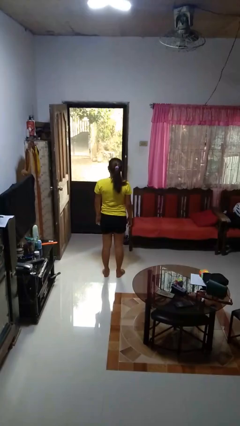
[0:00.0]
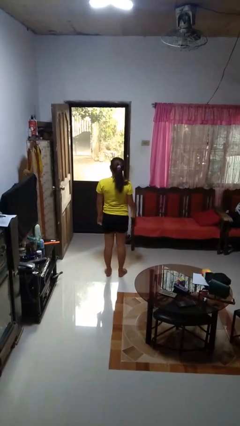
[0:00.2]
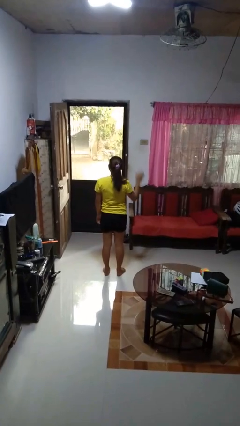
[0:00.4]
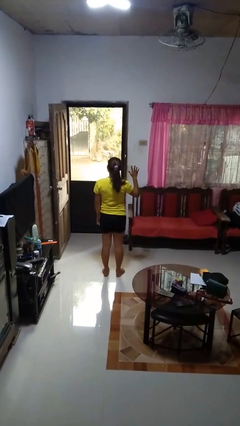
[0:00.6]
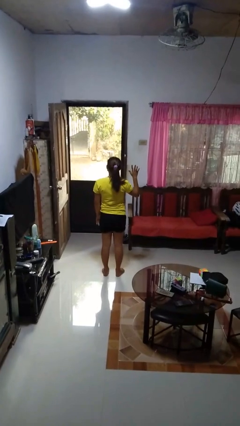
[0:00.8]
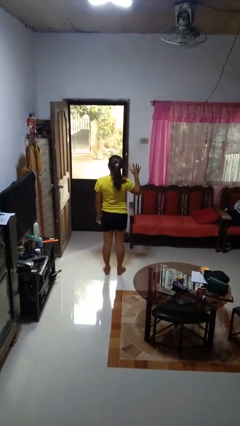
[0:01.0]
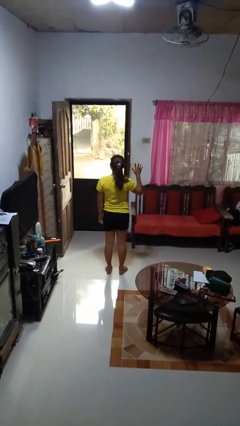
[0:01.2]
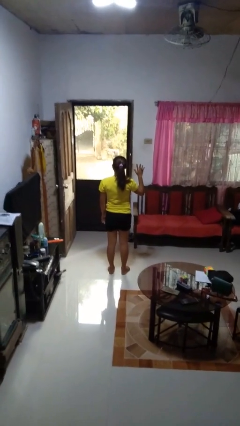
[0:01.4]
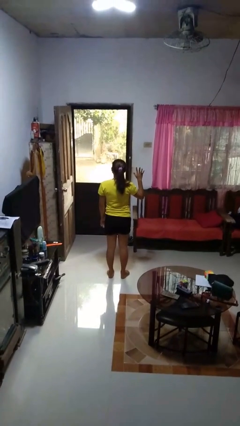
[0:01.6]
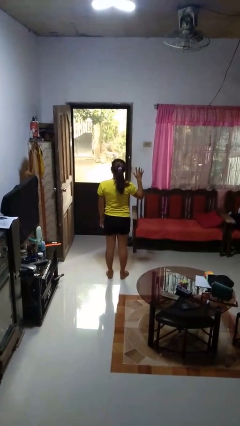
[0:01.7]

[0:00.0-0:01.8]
person gestures number five

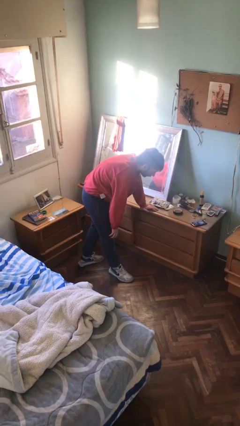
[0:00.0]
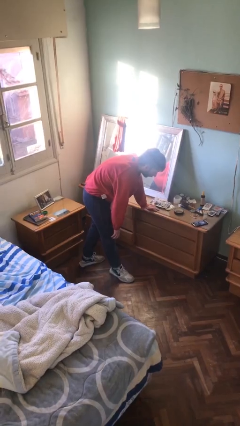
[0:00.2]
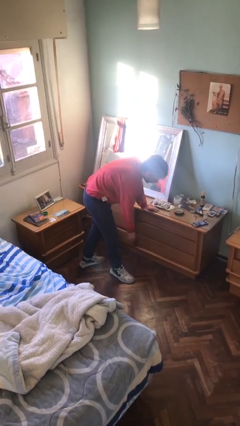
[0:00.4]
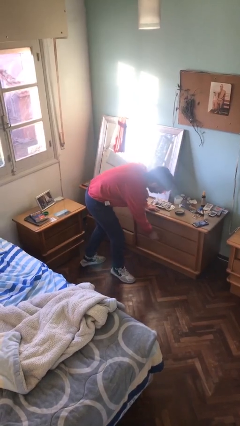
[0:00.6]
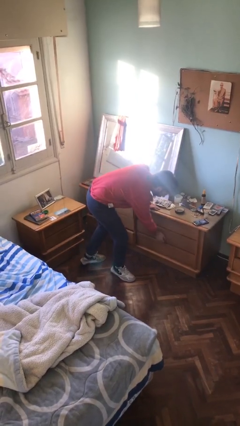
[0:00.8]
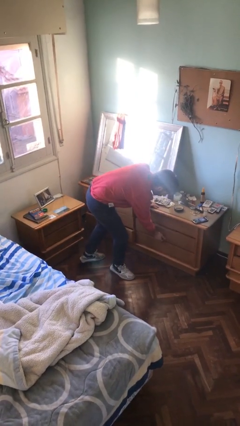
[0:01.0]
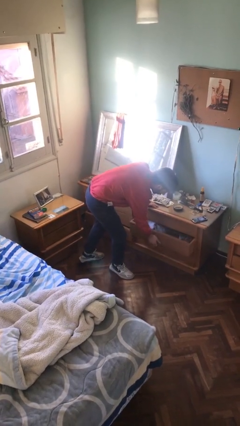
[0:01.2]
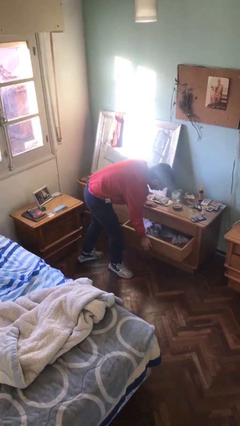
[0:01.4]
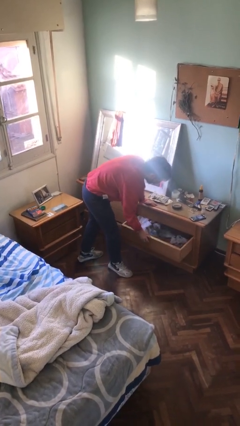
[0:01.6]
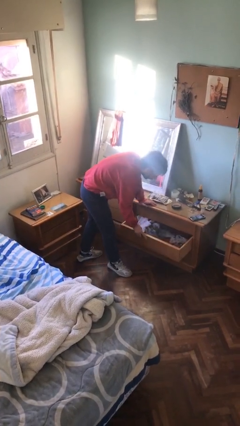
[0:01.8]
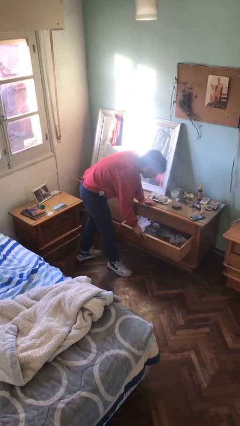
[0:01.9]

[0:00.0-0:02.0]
person opens dresser drawer

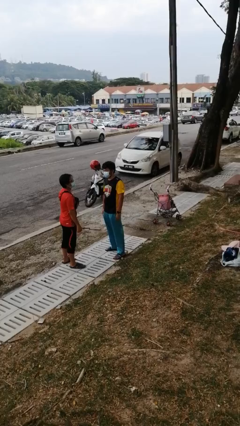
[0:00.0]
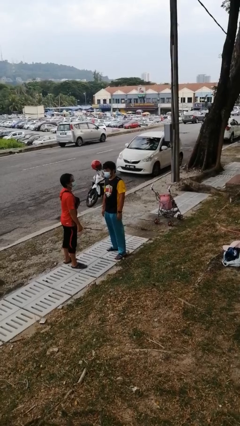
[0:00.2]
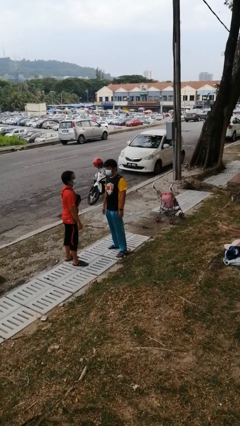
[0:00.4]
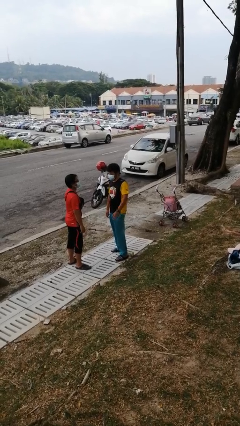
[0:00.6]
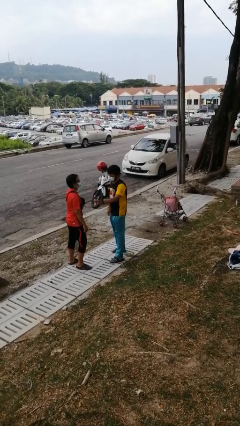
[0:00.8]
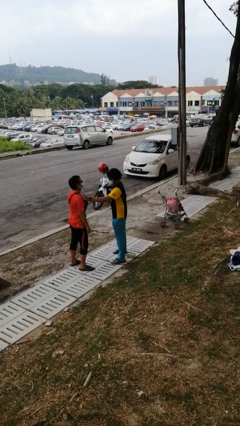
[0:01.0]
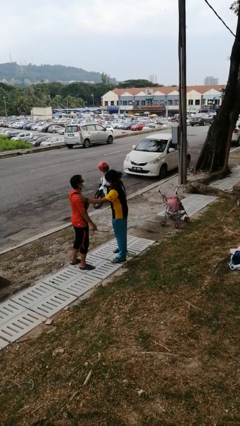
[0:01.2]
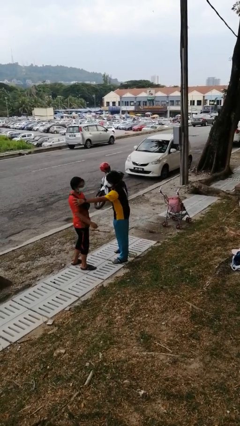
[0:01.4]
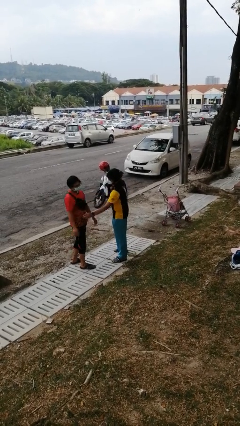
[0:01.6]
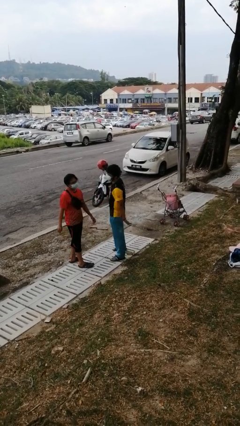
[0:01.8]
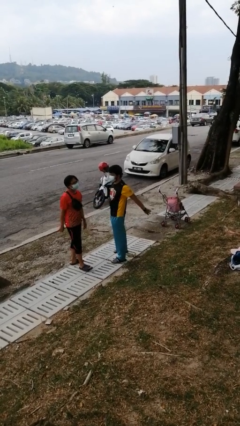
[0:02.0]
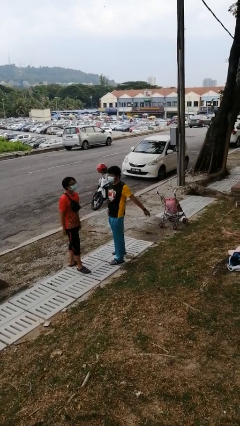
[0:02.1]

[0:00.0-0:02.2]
person shoves person

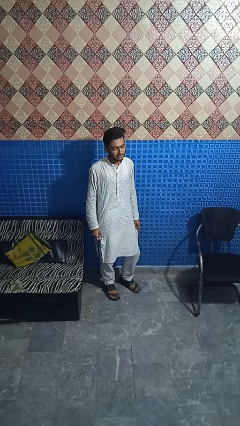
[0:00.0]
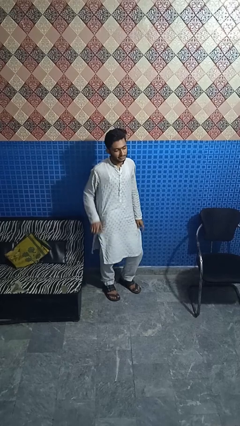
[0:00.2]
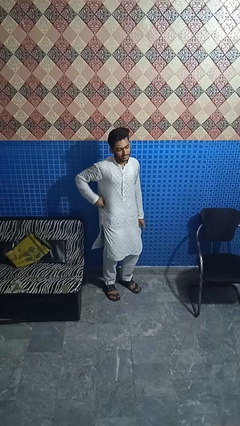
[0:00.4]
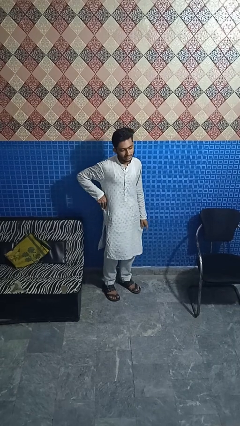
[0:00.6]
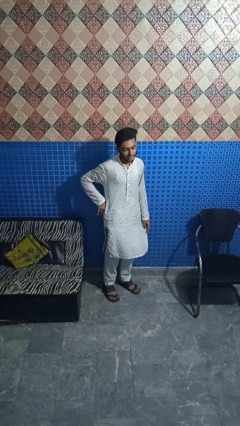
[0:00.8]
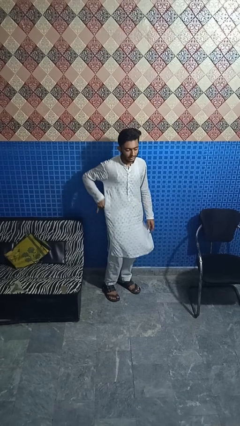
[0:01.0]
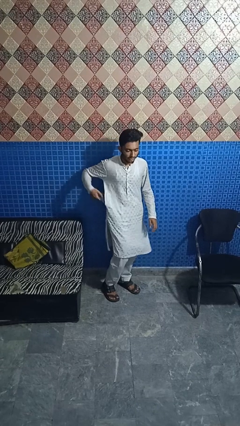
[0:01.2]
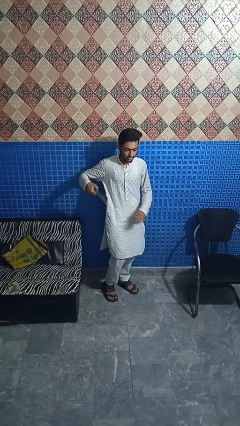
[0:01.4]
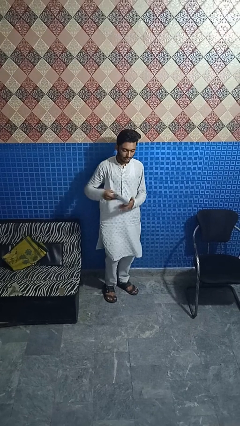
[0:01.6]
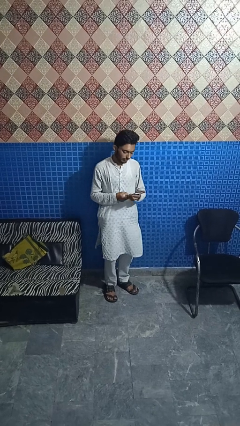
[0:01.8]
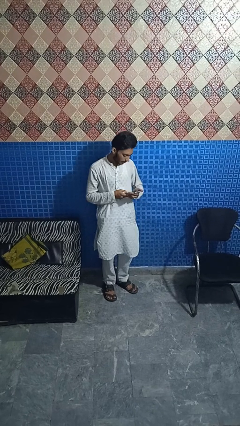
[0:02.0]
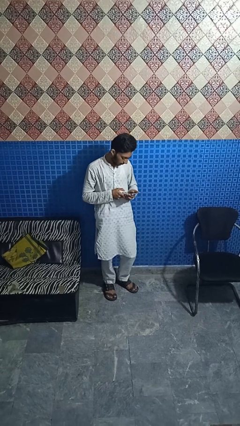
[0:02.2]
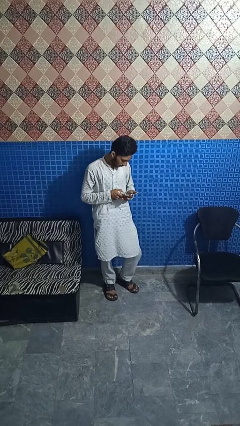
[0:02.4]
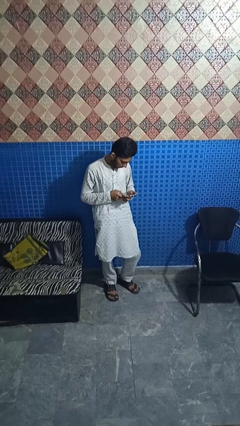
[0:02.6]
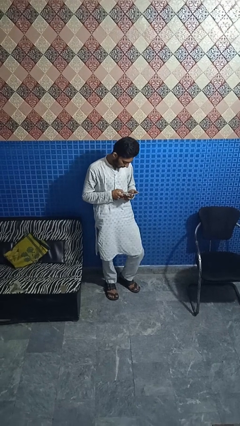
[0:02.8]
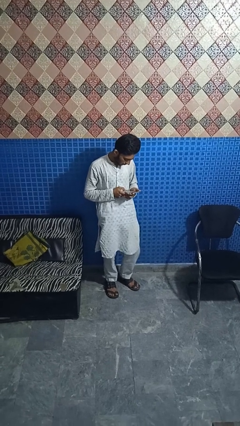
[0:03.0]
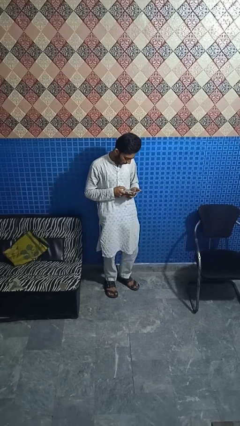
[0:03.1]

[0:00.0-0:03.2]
person takes phone from pocket

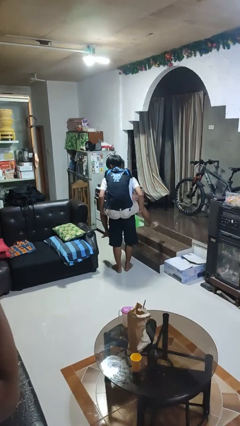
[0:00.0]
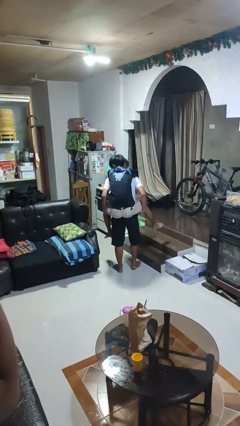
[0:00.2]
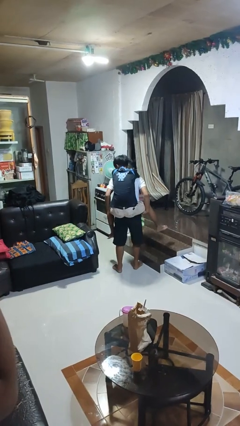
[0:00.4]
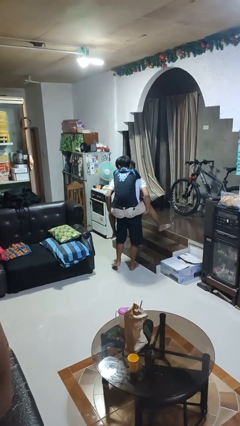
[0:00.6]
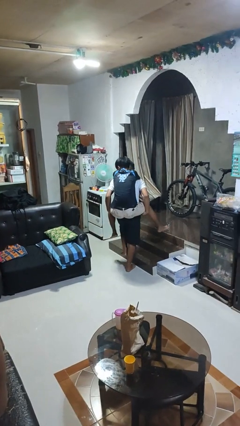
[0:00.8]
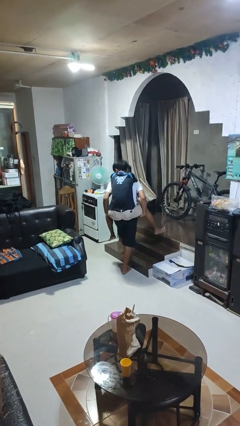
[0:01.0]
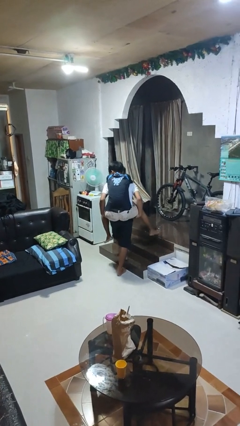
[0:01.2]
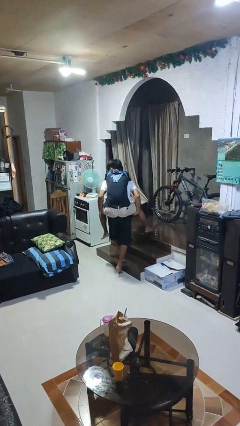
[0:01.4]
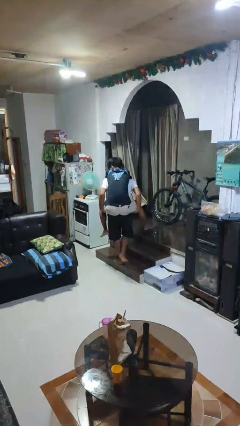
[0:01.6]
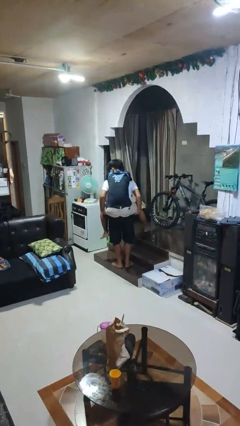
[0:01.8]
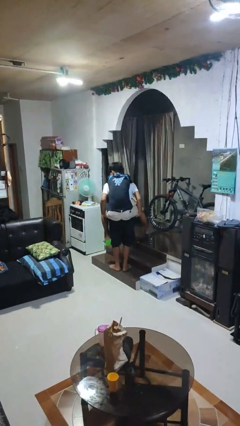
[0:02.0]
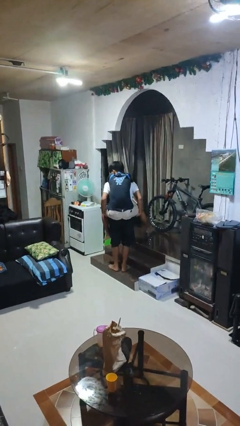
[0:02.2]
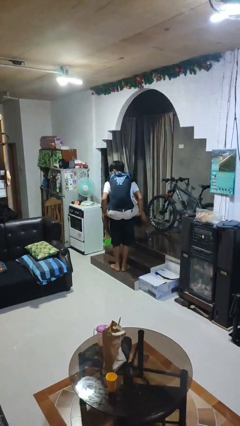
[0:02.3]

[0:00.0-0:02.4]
person carries person on back

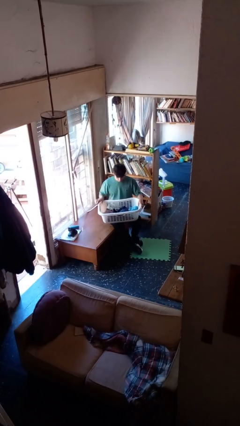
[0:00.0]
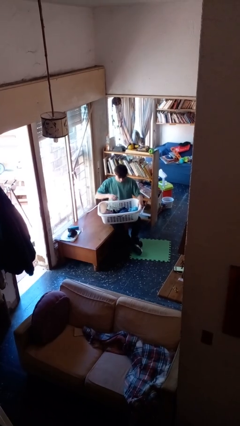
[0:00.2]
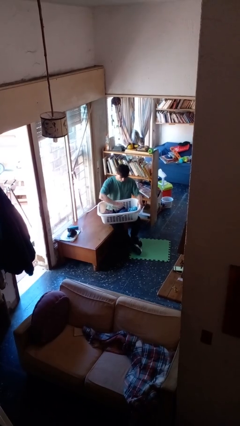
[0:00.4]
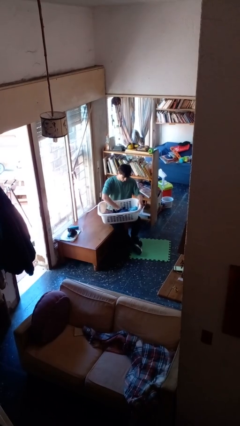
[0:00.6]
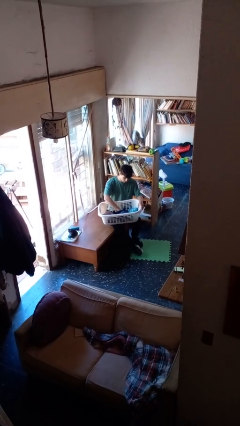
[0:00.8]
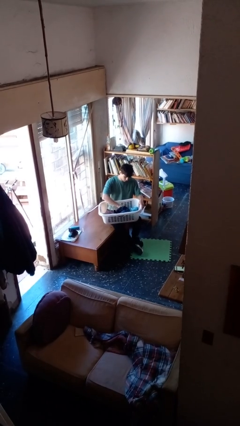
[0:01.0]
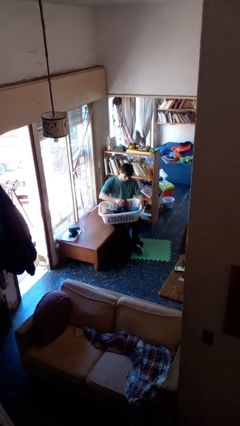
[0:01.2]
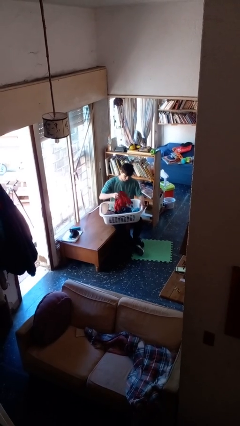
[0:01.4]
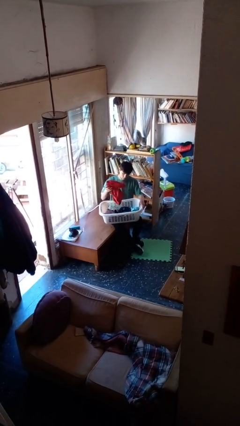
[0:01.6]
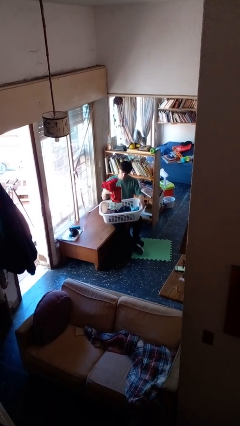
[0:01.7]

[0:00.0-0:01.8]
person takes object from basket

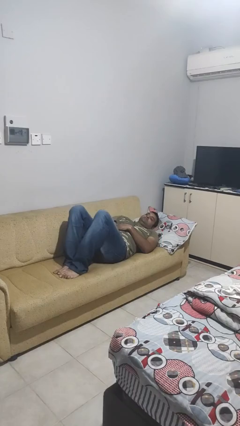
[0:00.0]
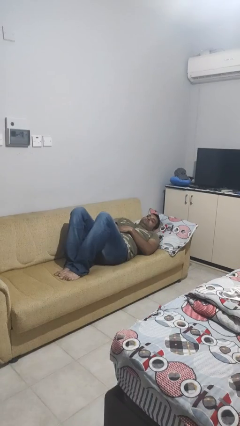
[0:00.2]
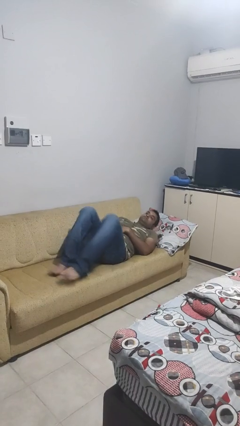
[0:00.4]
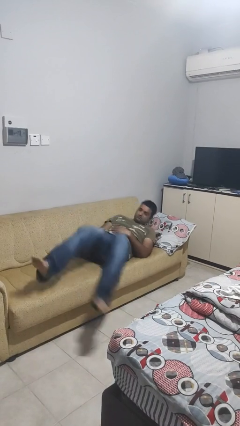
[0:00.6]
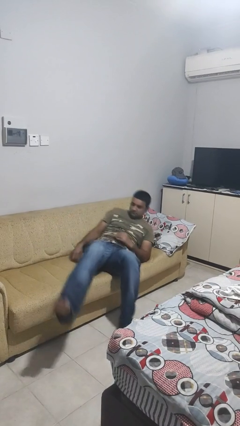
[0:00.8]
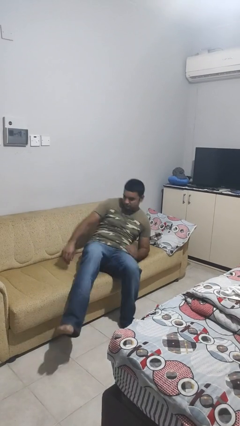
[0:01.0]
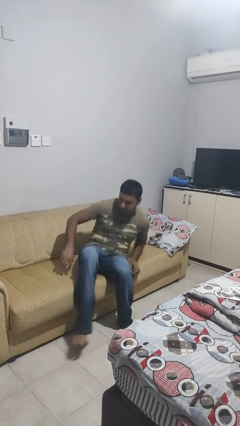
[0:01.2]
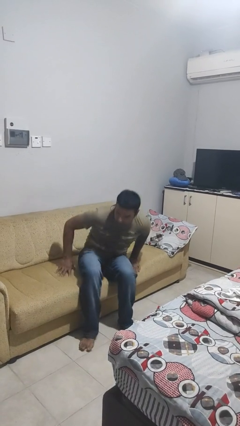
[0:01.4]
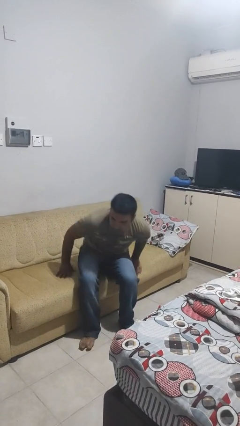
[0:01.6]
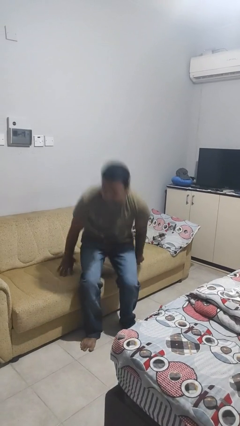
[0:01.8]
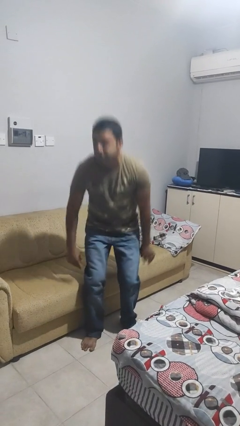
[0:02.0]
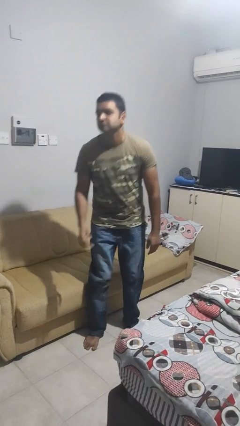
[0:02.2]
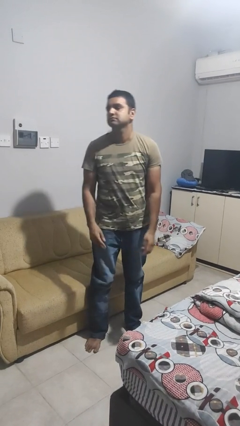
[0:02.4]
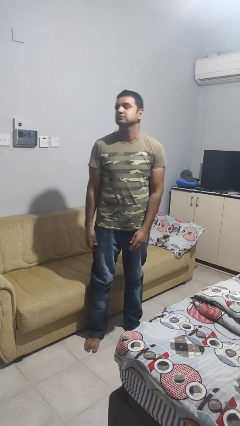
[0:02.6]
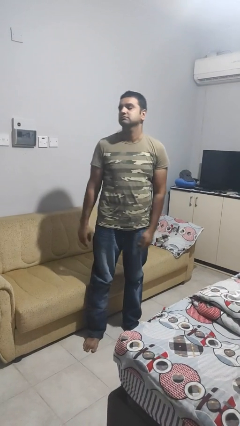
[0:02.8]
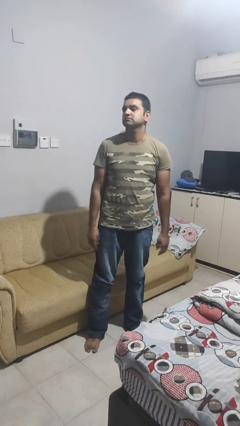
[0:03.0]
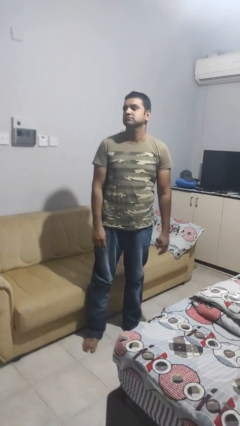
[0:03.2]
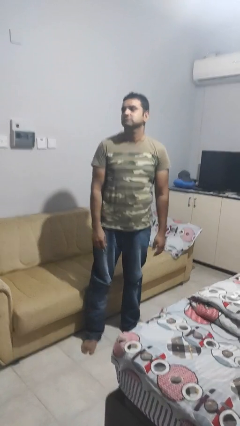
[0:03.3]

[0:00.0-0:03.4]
person stands up
